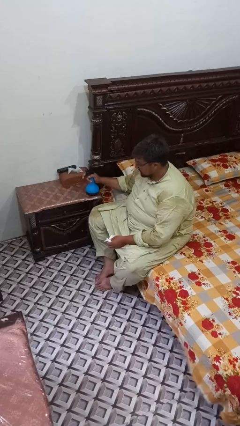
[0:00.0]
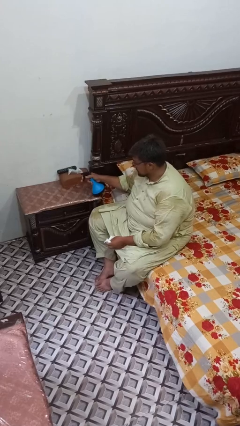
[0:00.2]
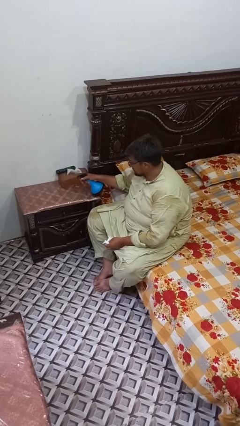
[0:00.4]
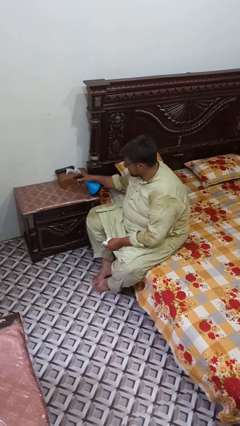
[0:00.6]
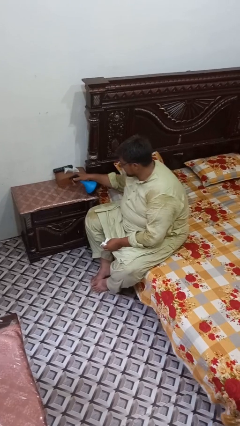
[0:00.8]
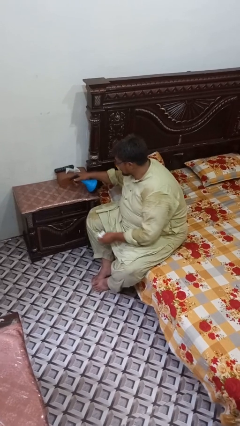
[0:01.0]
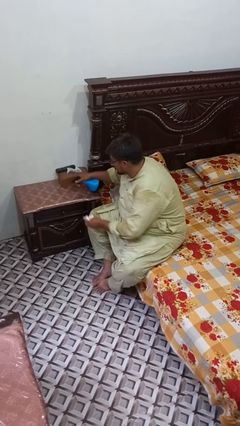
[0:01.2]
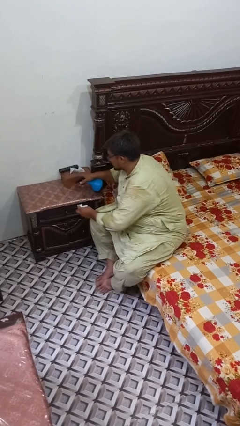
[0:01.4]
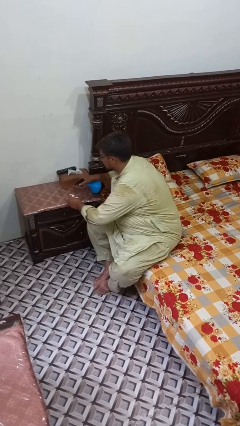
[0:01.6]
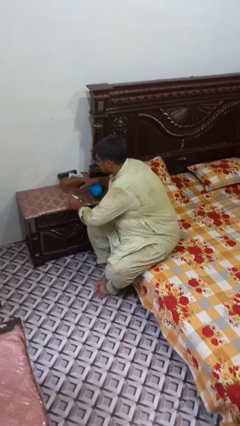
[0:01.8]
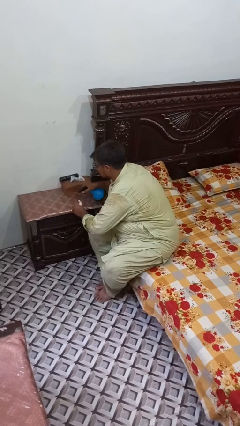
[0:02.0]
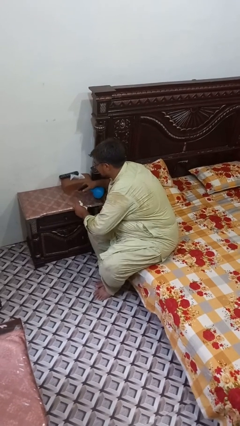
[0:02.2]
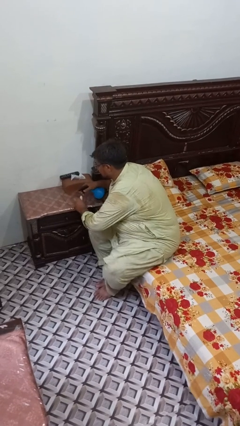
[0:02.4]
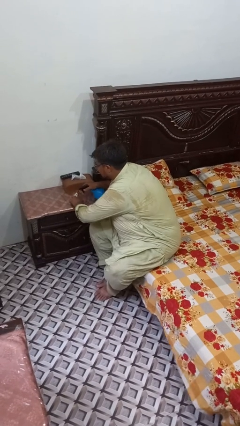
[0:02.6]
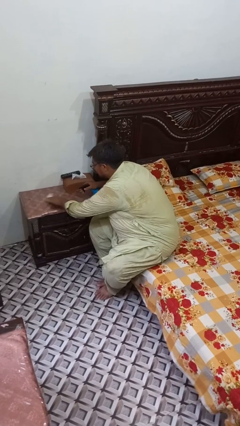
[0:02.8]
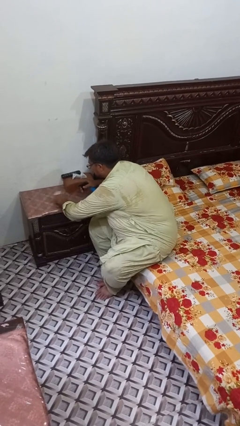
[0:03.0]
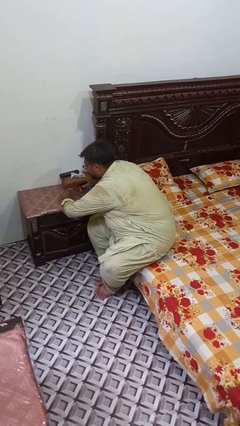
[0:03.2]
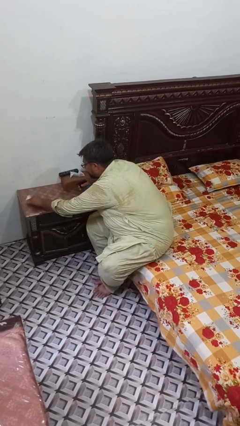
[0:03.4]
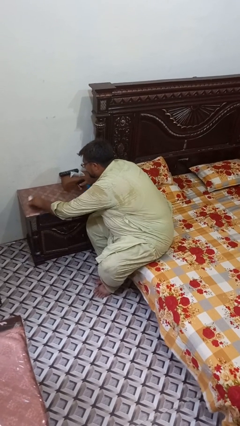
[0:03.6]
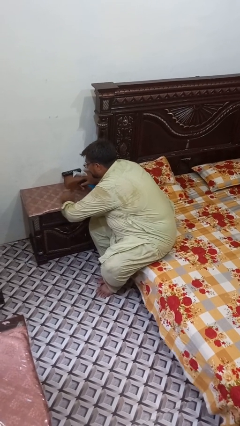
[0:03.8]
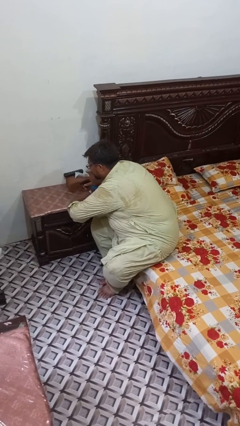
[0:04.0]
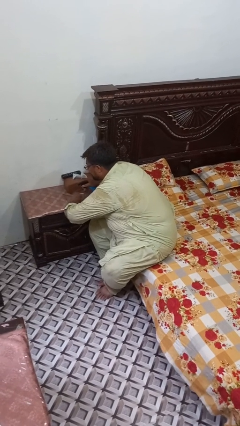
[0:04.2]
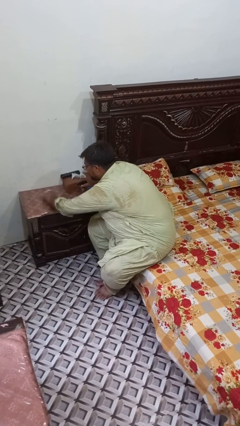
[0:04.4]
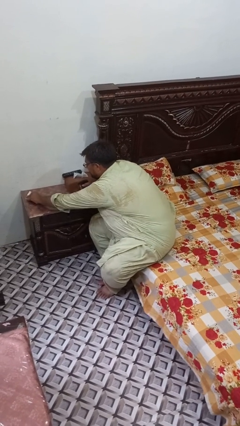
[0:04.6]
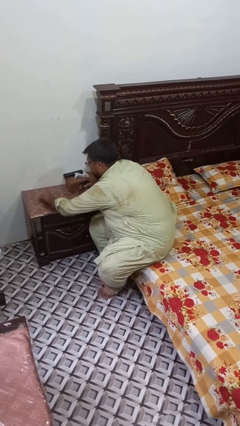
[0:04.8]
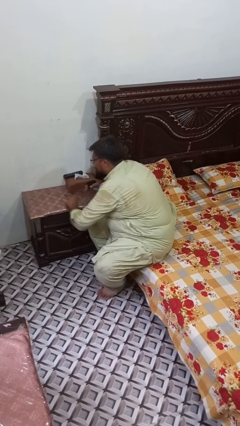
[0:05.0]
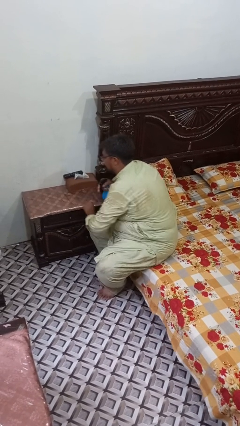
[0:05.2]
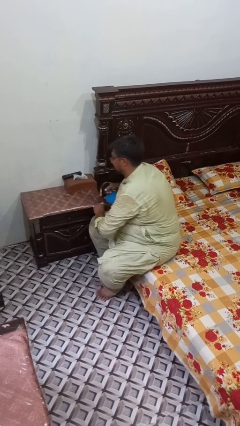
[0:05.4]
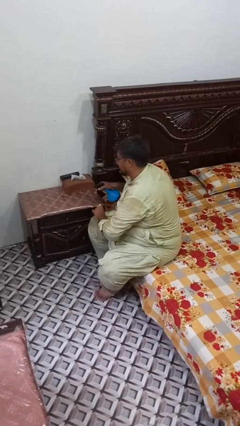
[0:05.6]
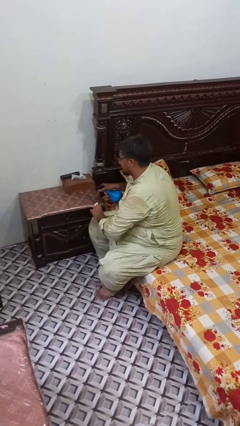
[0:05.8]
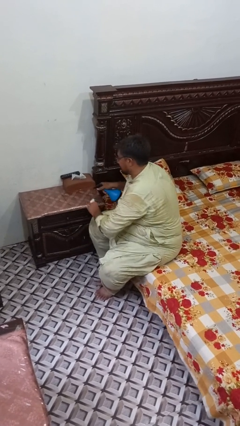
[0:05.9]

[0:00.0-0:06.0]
person sprays from bottle

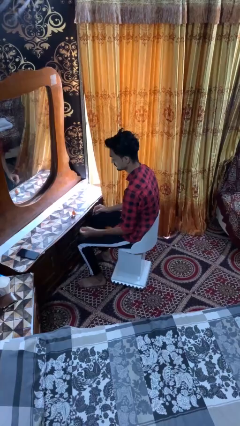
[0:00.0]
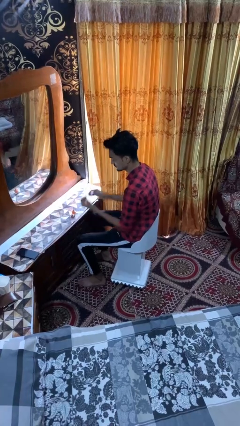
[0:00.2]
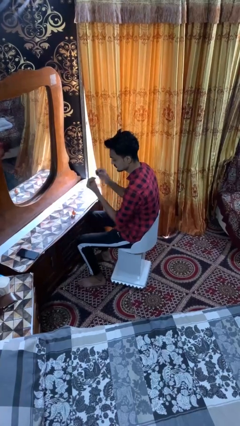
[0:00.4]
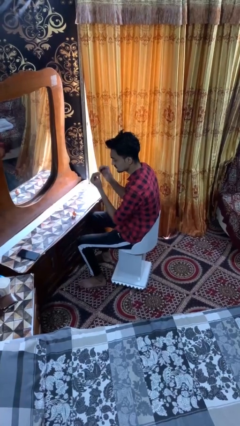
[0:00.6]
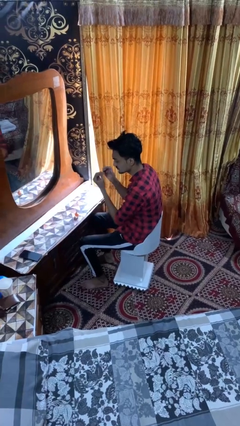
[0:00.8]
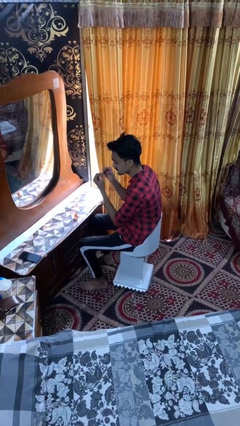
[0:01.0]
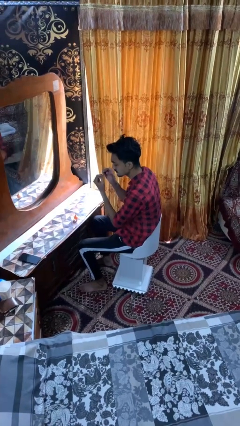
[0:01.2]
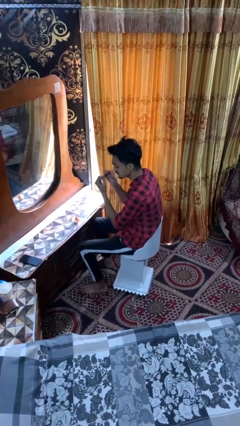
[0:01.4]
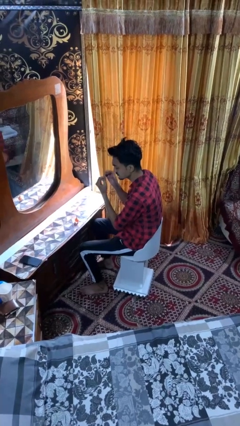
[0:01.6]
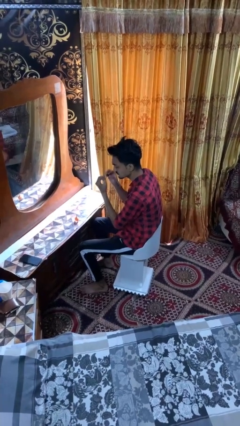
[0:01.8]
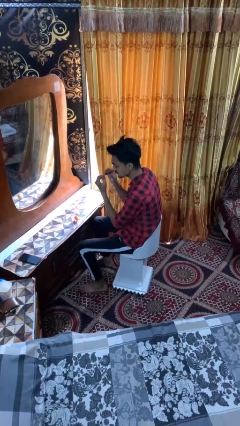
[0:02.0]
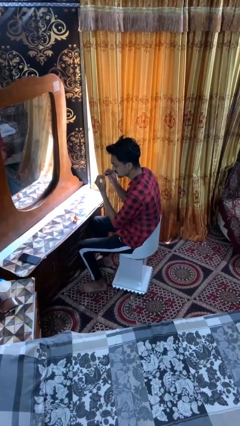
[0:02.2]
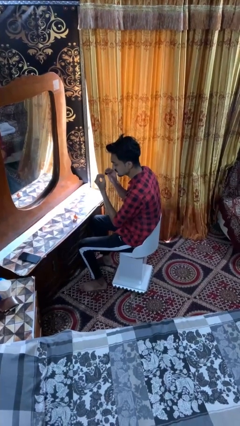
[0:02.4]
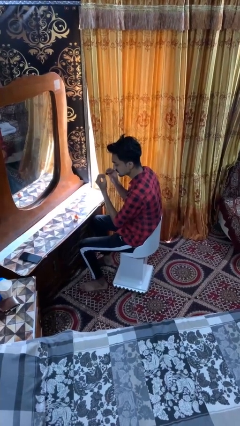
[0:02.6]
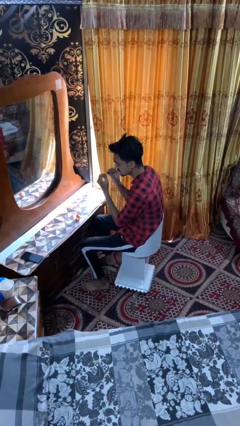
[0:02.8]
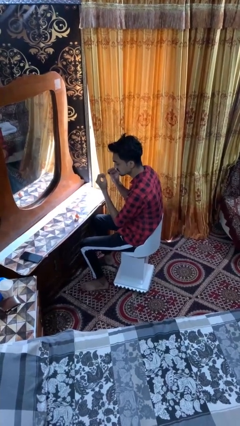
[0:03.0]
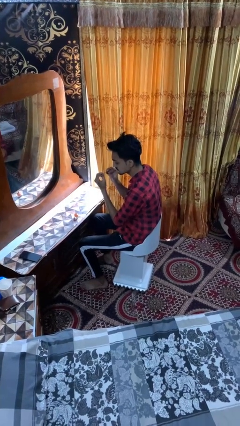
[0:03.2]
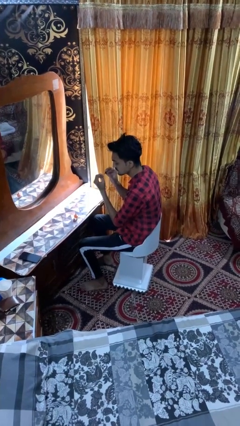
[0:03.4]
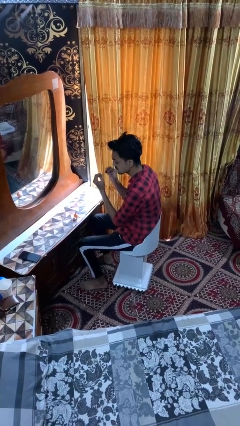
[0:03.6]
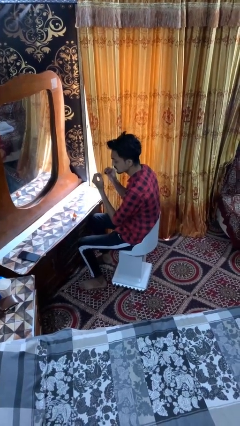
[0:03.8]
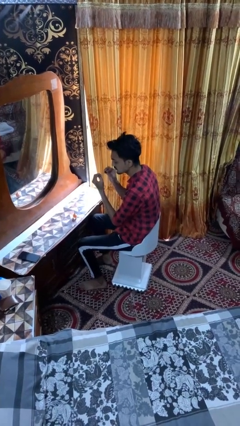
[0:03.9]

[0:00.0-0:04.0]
person paints fingernails

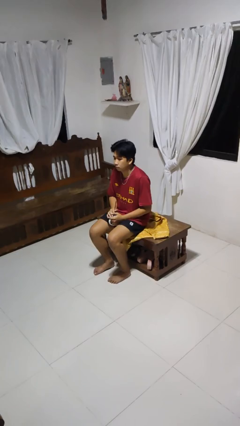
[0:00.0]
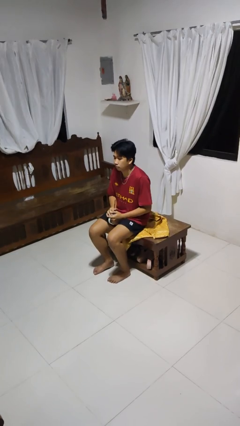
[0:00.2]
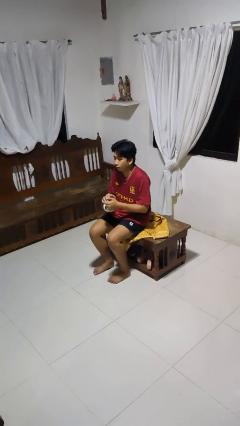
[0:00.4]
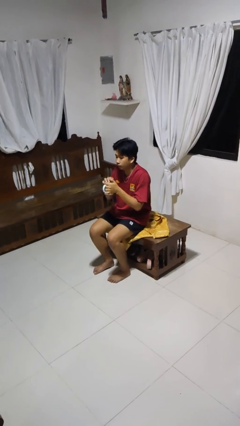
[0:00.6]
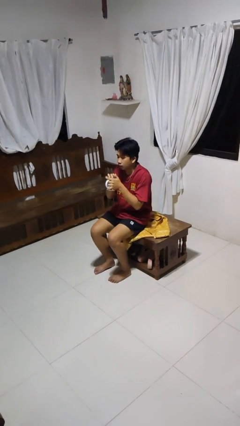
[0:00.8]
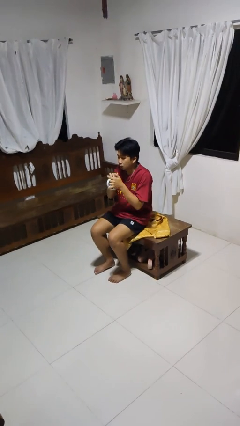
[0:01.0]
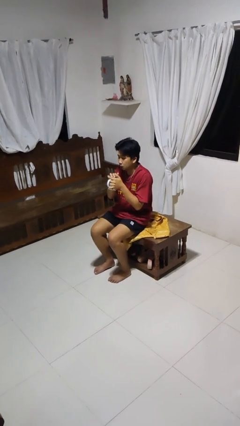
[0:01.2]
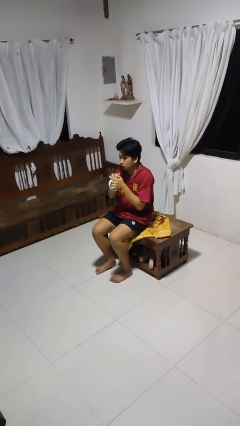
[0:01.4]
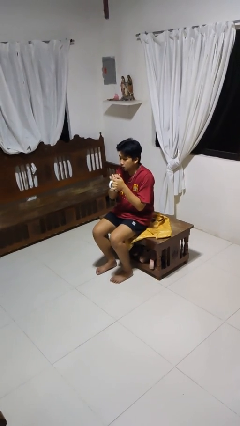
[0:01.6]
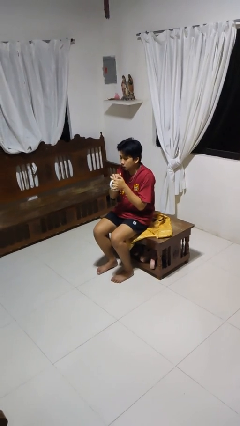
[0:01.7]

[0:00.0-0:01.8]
person drinks from straw

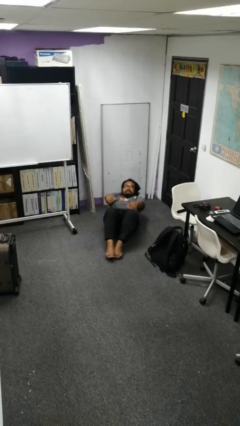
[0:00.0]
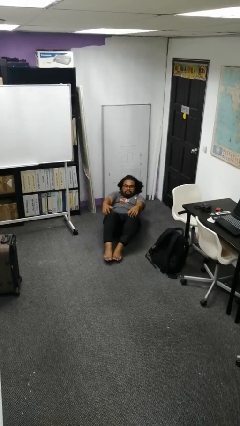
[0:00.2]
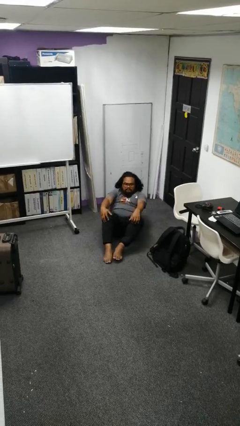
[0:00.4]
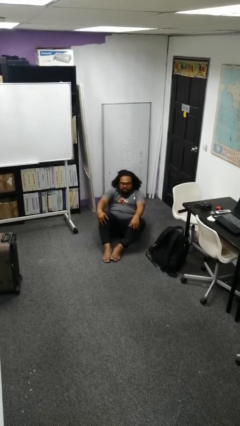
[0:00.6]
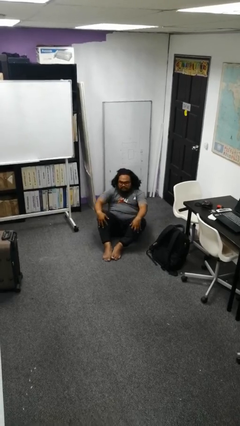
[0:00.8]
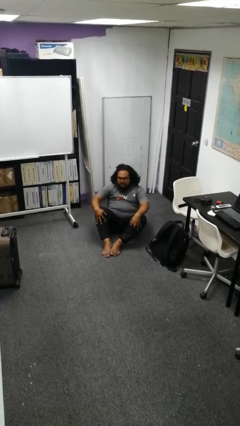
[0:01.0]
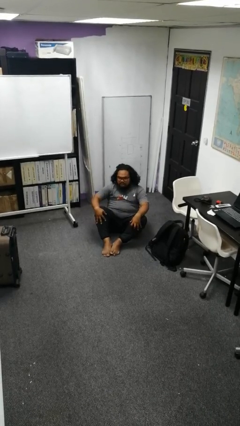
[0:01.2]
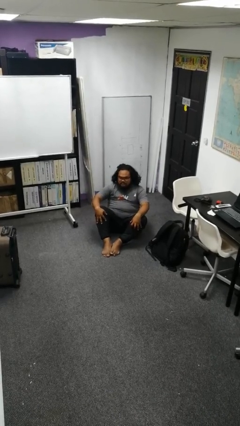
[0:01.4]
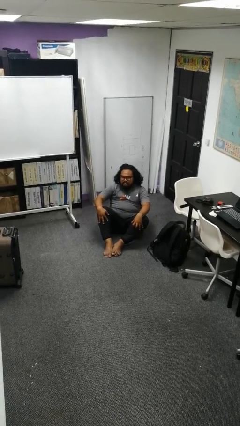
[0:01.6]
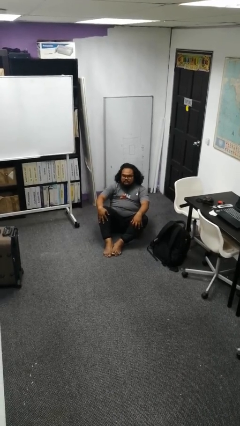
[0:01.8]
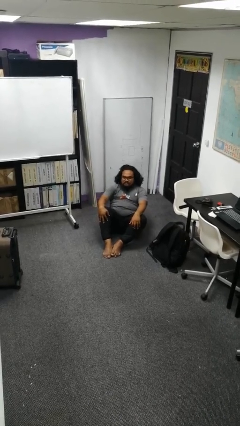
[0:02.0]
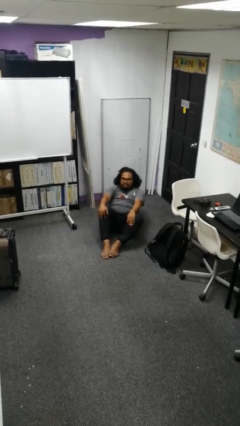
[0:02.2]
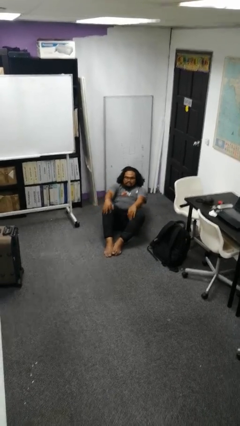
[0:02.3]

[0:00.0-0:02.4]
person exercises with situp

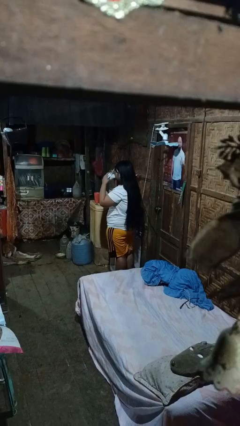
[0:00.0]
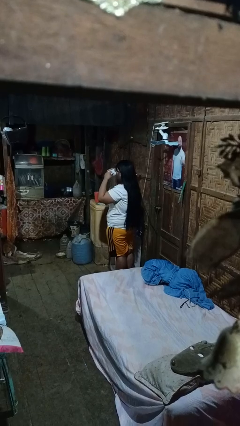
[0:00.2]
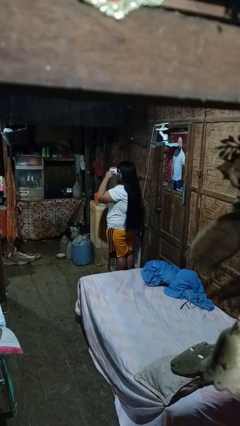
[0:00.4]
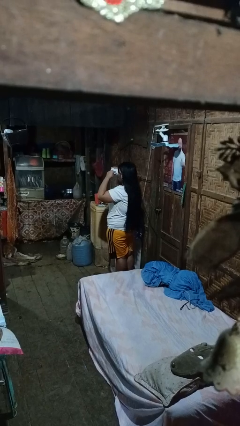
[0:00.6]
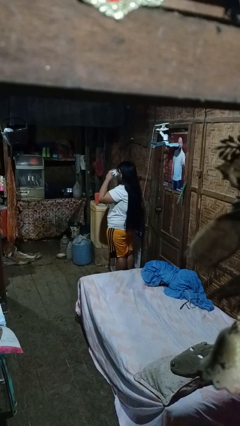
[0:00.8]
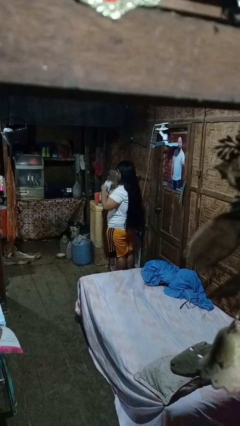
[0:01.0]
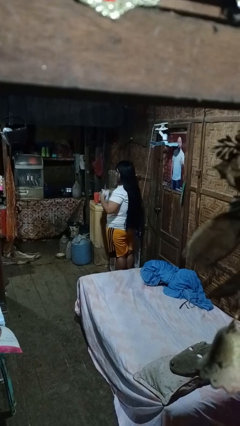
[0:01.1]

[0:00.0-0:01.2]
person drinks from mug

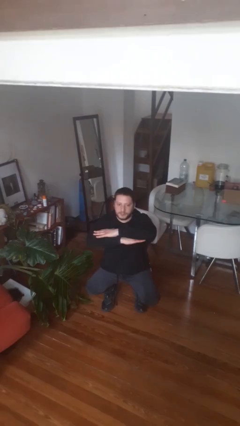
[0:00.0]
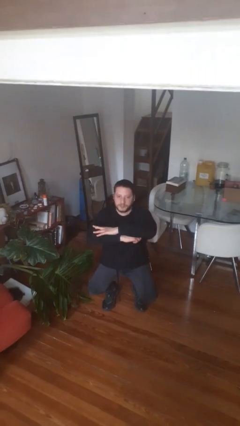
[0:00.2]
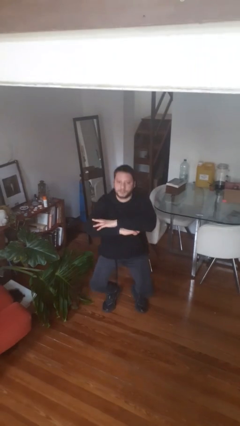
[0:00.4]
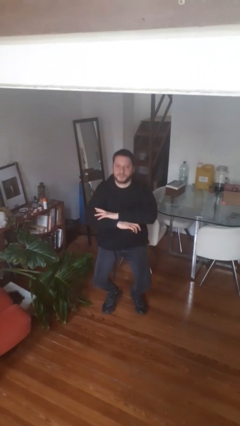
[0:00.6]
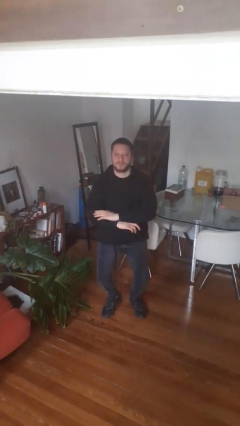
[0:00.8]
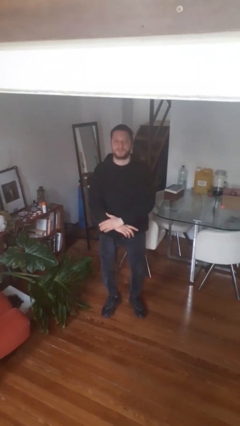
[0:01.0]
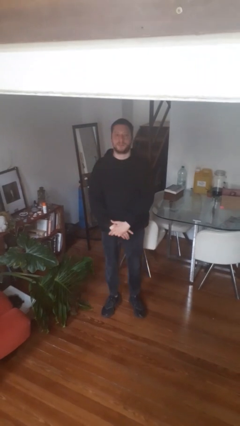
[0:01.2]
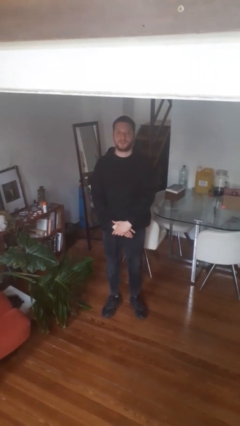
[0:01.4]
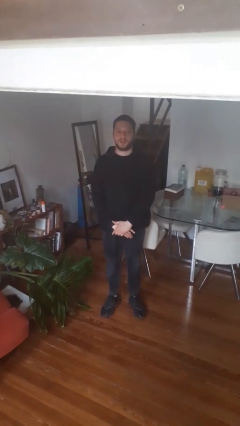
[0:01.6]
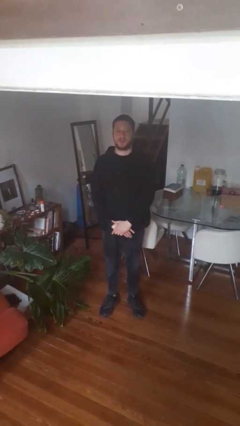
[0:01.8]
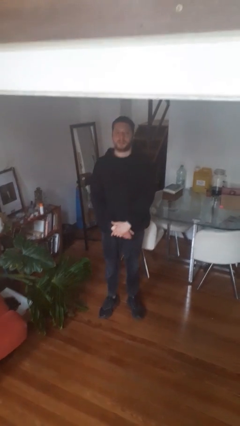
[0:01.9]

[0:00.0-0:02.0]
person stands up
